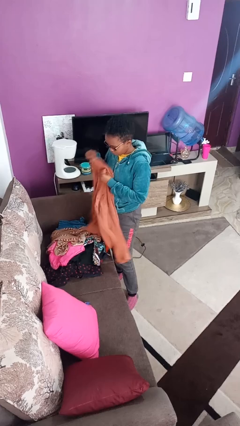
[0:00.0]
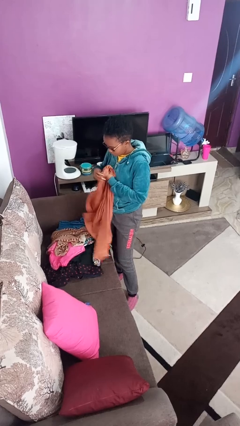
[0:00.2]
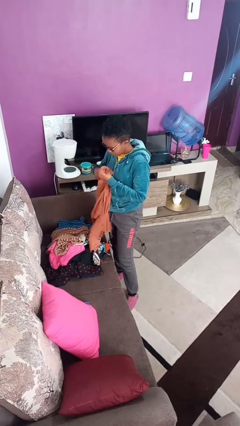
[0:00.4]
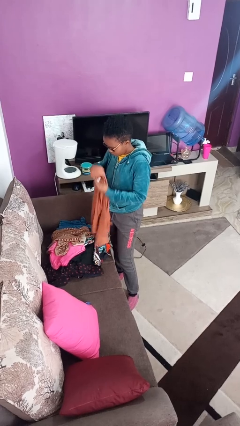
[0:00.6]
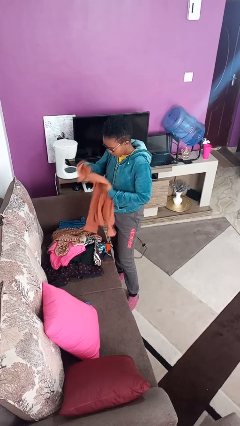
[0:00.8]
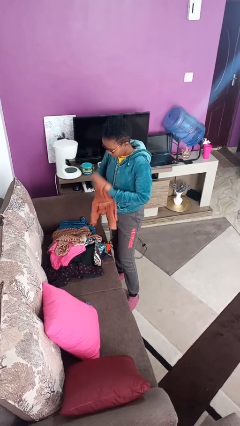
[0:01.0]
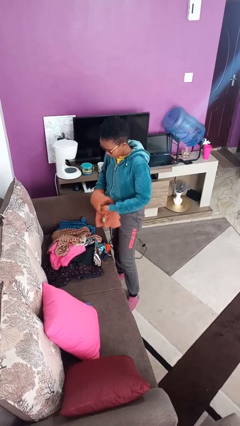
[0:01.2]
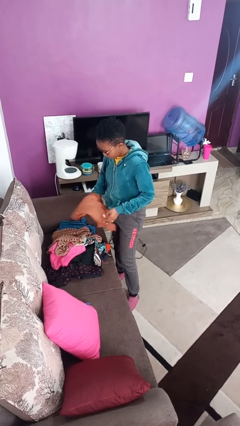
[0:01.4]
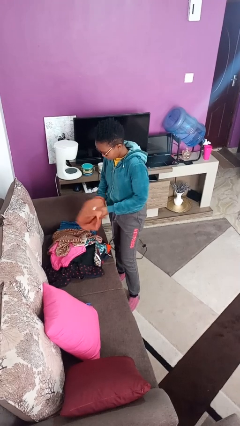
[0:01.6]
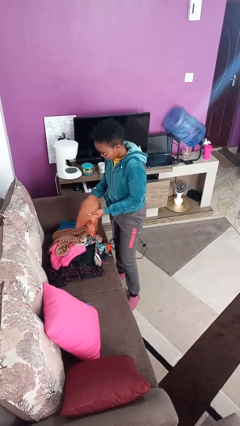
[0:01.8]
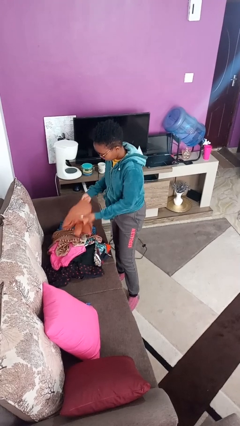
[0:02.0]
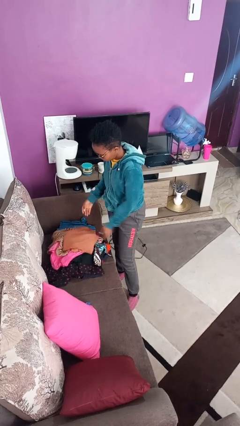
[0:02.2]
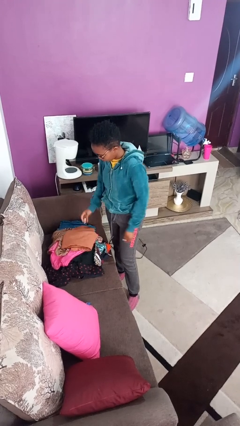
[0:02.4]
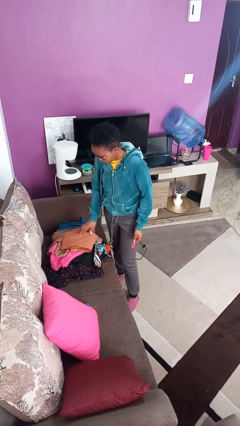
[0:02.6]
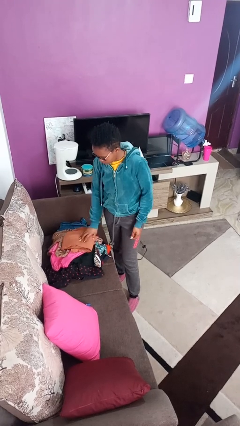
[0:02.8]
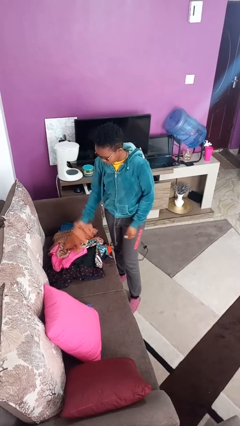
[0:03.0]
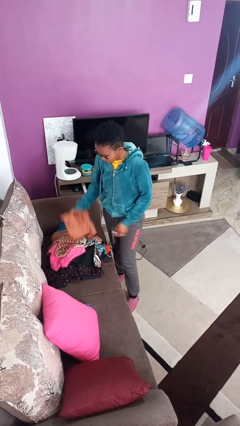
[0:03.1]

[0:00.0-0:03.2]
person folds shirt

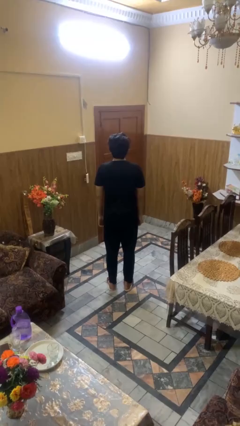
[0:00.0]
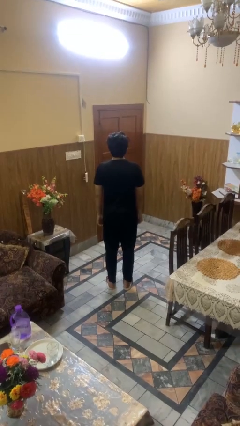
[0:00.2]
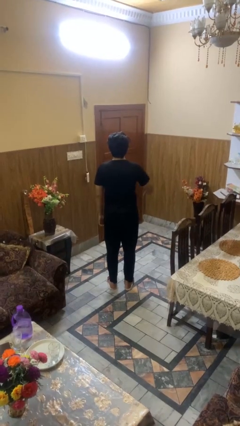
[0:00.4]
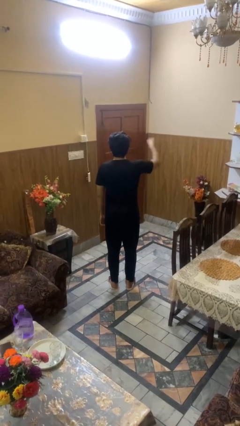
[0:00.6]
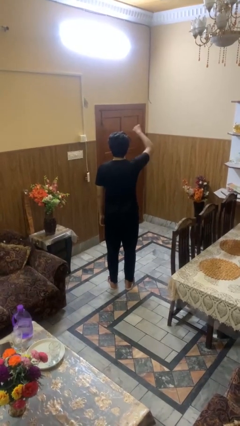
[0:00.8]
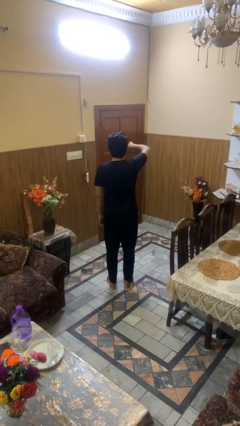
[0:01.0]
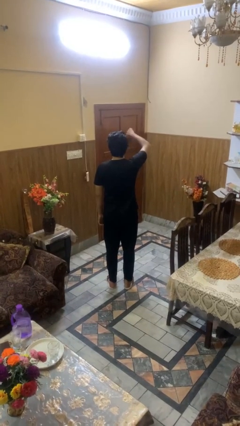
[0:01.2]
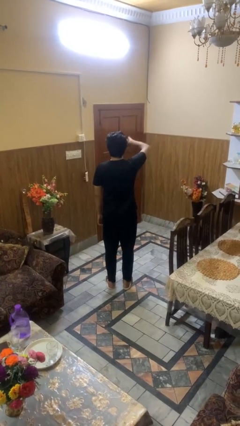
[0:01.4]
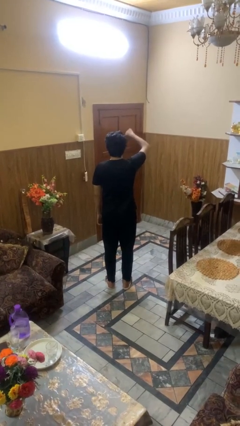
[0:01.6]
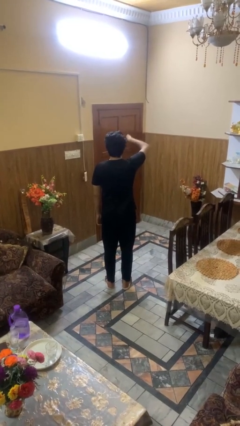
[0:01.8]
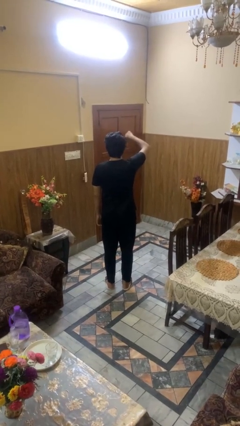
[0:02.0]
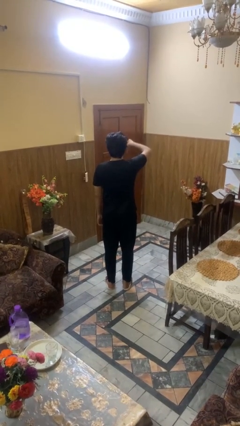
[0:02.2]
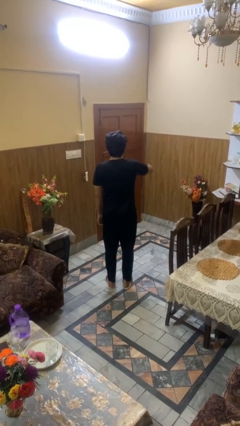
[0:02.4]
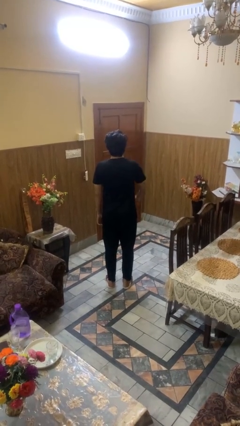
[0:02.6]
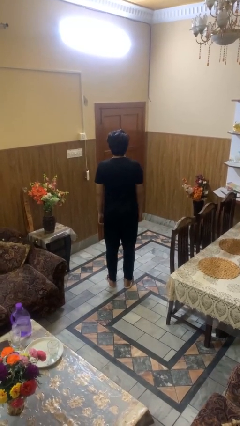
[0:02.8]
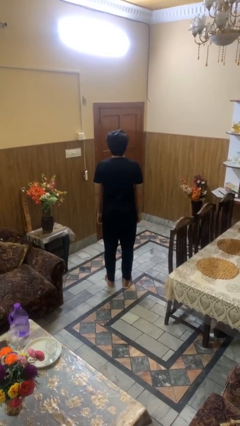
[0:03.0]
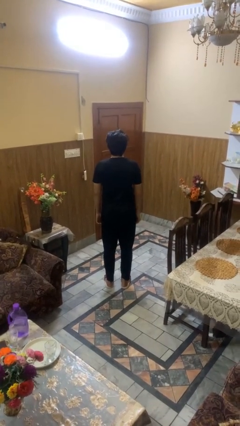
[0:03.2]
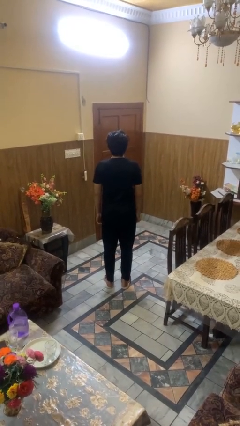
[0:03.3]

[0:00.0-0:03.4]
person gestures thumbs down

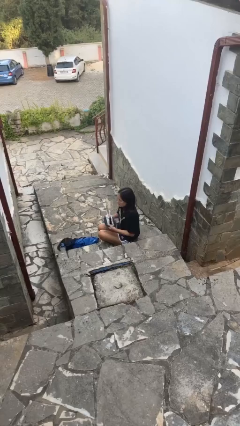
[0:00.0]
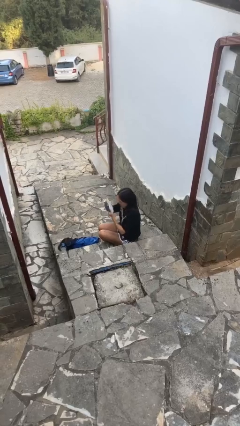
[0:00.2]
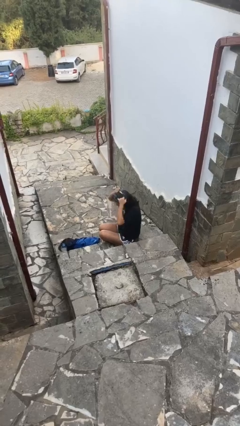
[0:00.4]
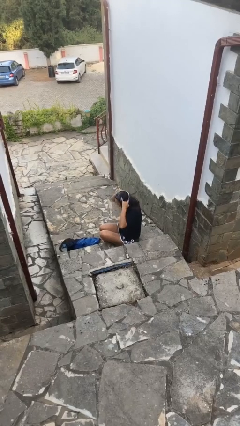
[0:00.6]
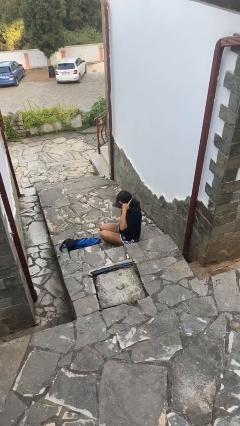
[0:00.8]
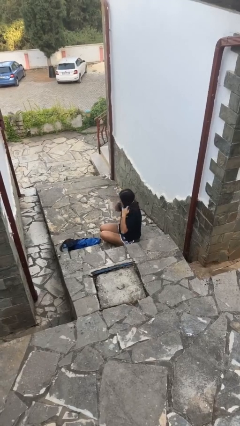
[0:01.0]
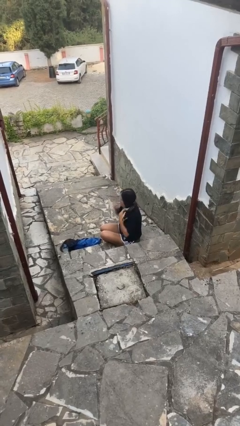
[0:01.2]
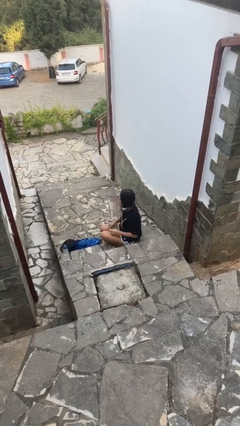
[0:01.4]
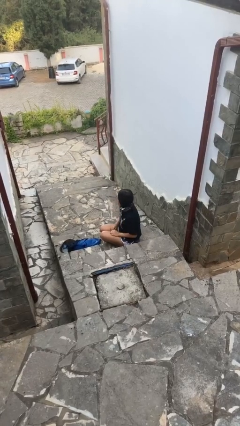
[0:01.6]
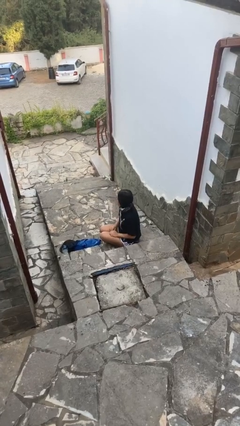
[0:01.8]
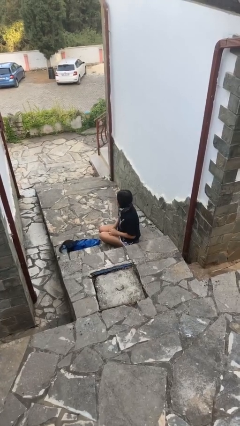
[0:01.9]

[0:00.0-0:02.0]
person puts on scarf

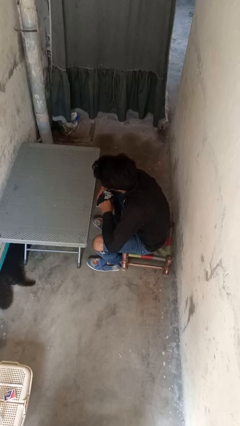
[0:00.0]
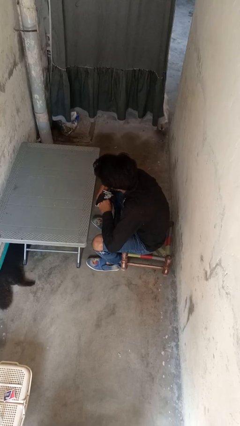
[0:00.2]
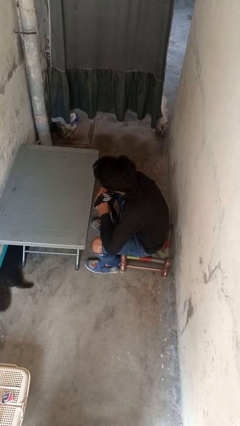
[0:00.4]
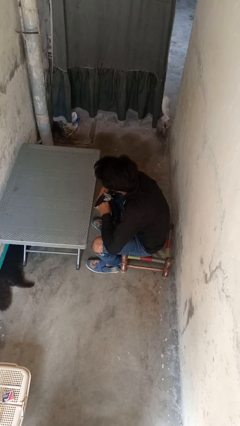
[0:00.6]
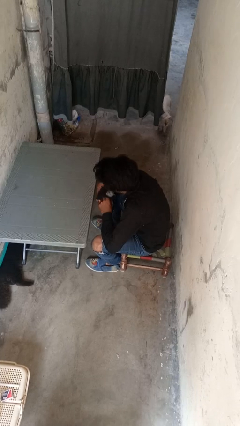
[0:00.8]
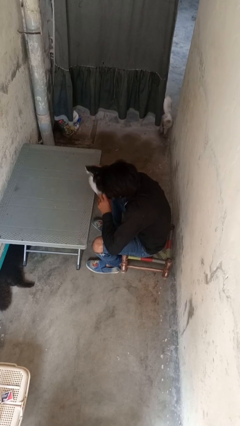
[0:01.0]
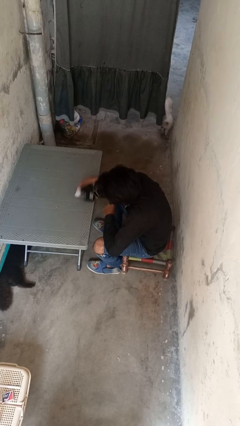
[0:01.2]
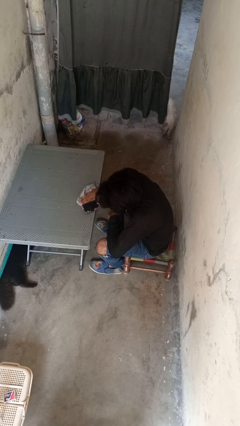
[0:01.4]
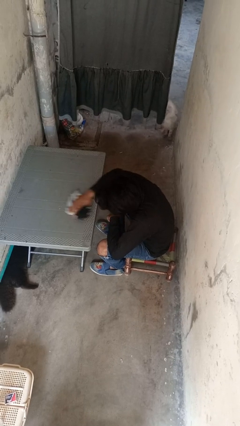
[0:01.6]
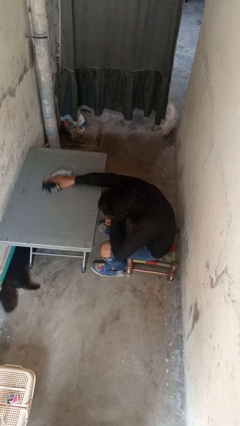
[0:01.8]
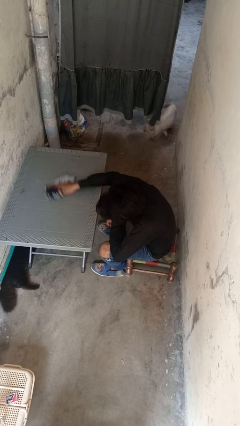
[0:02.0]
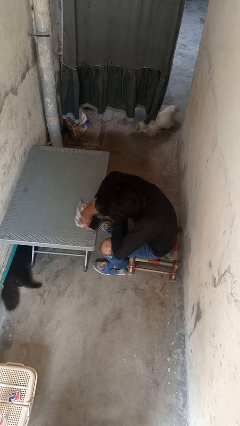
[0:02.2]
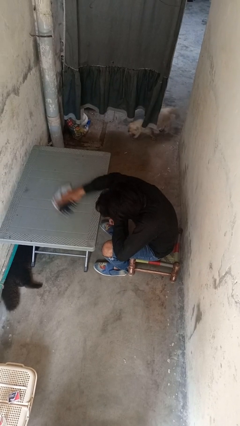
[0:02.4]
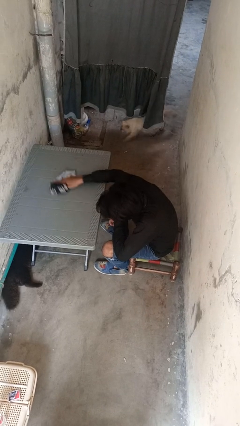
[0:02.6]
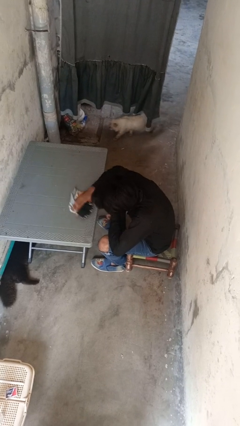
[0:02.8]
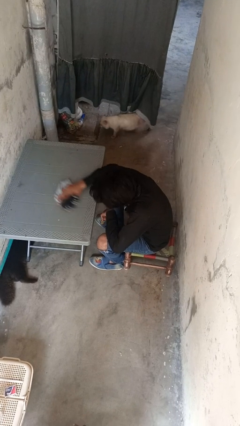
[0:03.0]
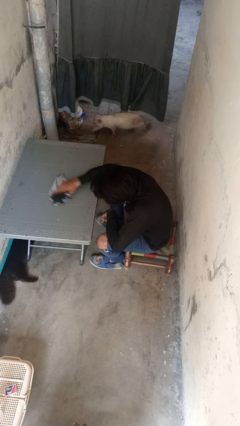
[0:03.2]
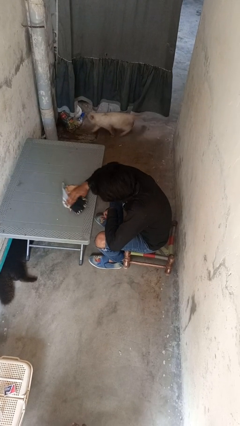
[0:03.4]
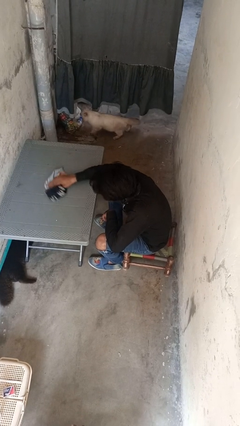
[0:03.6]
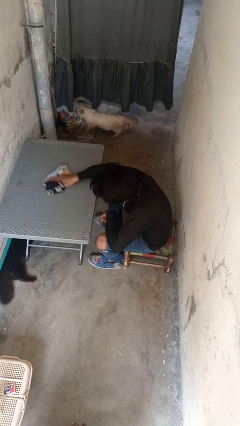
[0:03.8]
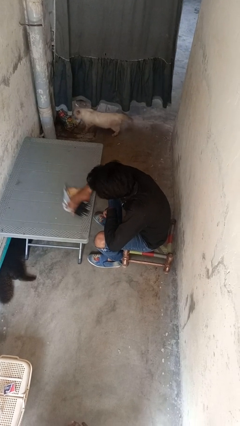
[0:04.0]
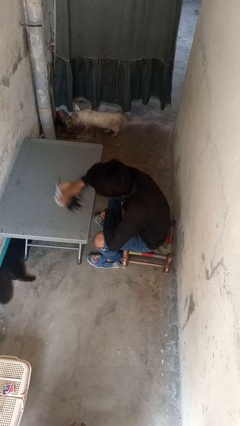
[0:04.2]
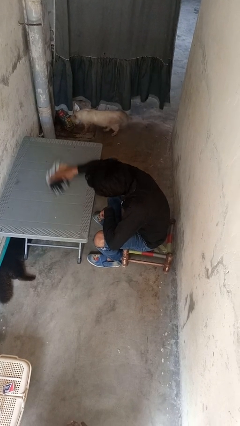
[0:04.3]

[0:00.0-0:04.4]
person cleans table with rag

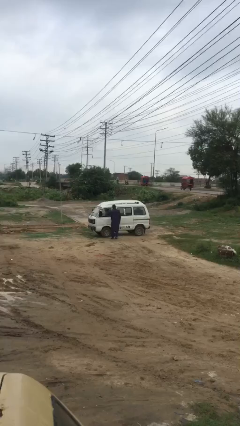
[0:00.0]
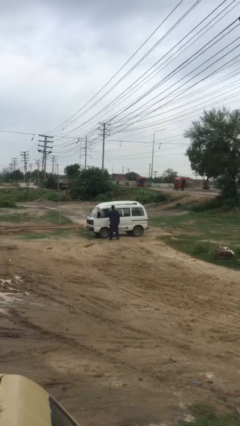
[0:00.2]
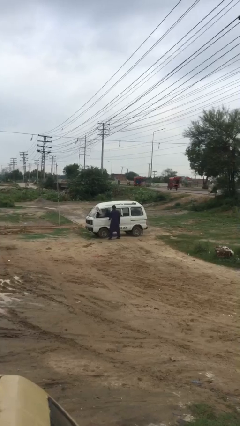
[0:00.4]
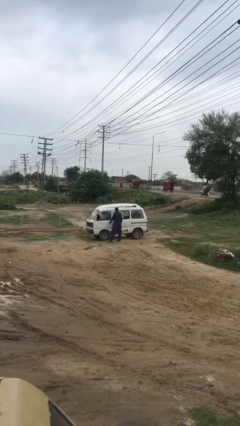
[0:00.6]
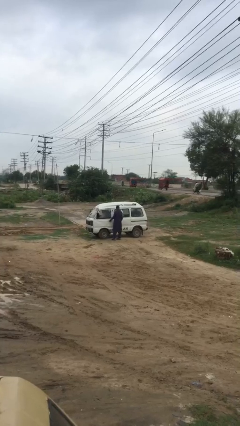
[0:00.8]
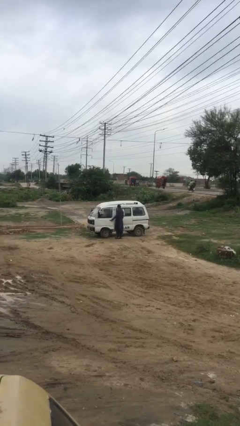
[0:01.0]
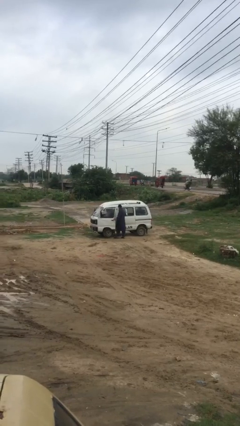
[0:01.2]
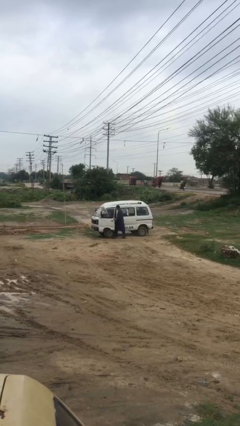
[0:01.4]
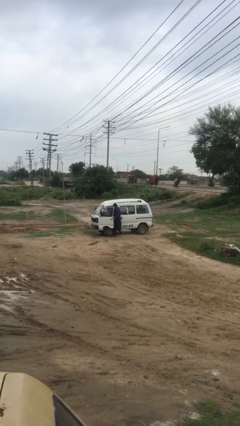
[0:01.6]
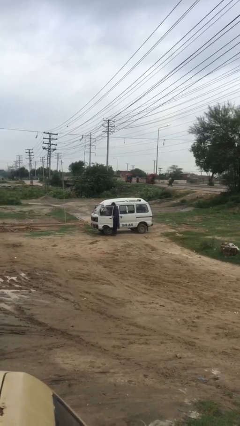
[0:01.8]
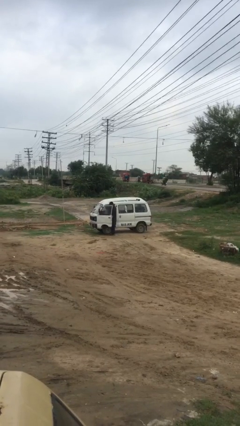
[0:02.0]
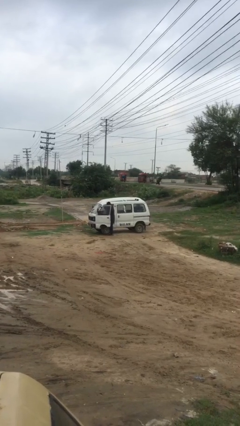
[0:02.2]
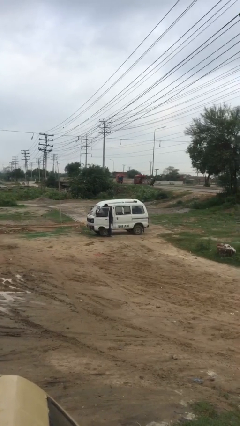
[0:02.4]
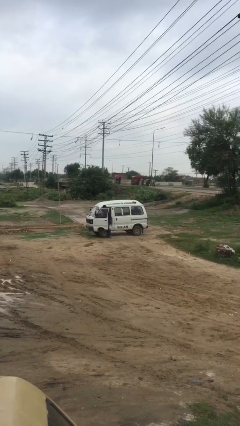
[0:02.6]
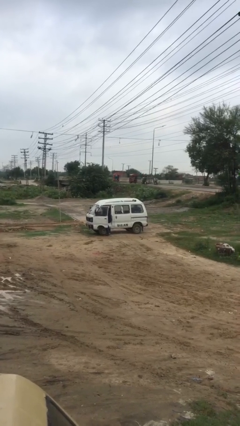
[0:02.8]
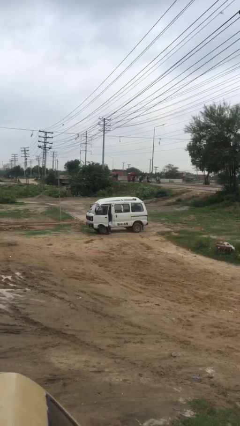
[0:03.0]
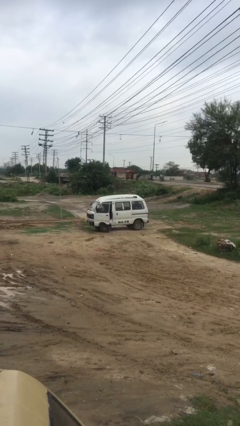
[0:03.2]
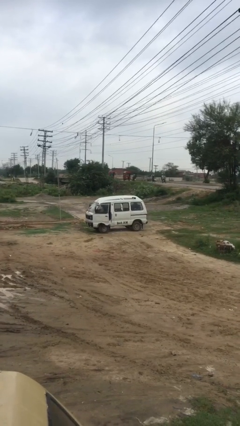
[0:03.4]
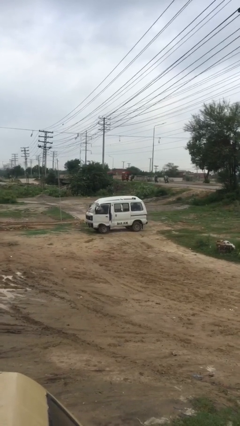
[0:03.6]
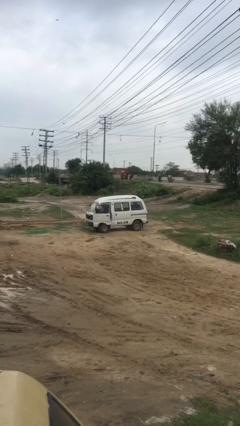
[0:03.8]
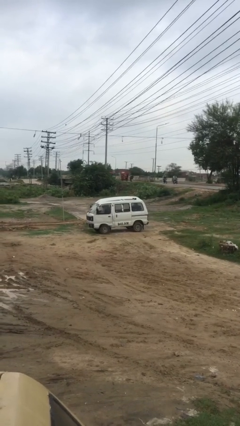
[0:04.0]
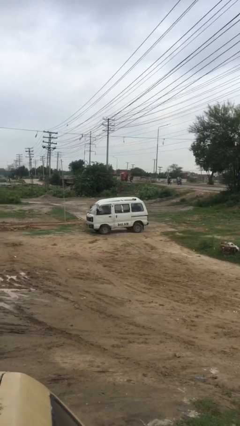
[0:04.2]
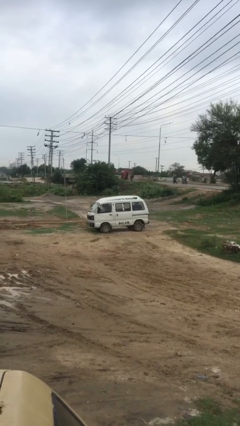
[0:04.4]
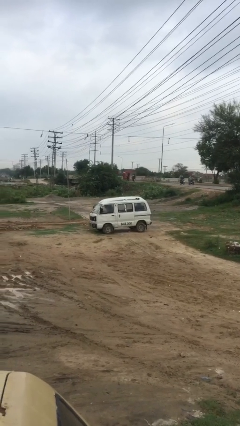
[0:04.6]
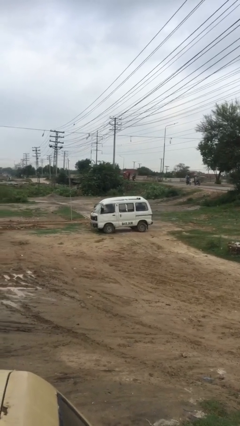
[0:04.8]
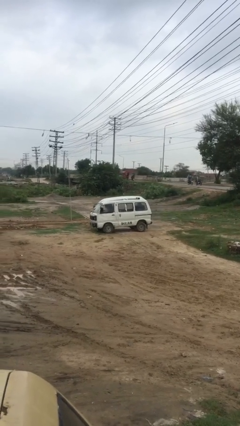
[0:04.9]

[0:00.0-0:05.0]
car picks up person
